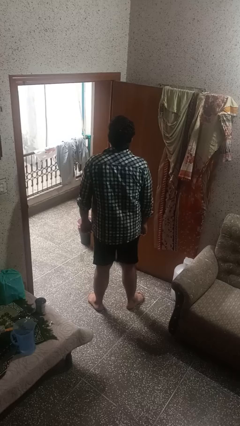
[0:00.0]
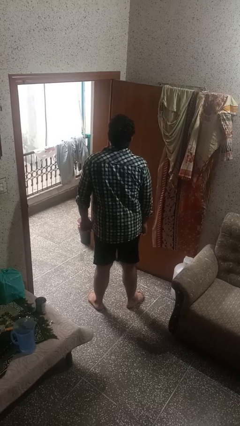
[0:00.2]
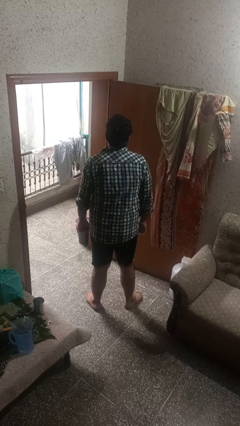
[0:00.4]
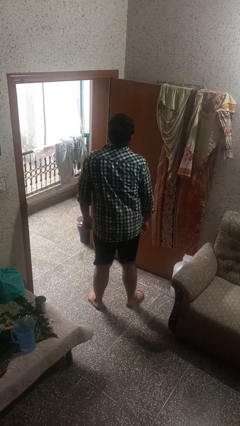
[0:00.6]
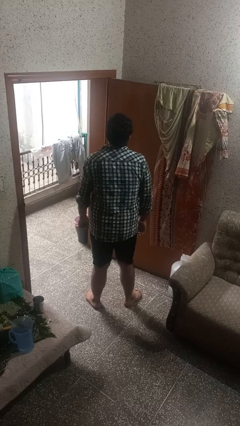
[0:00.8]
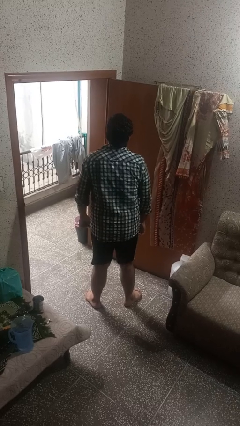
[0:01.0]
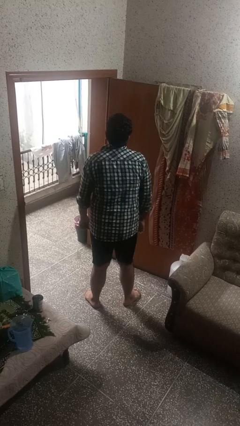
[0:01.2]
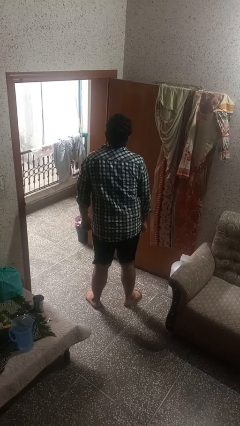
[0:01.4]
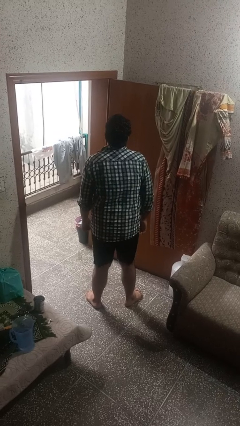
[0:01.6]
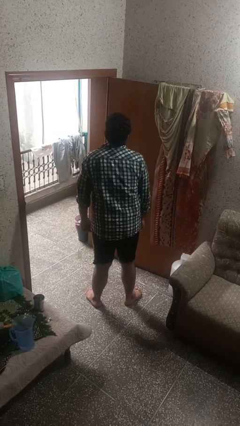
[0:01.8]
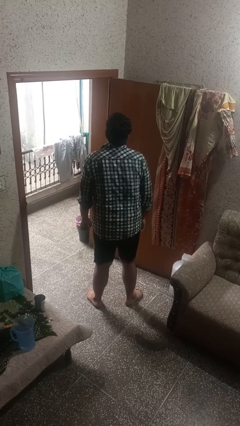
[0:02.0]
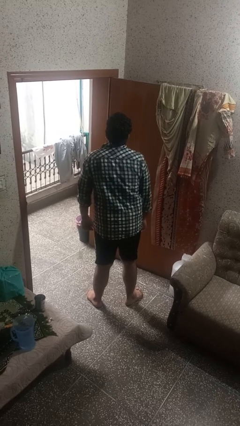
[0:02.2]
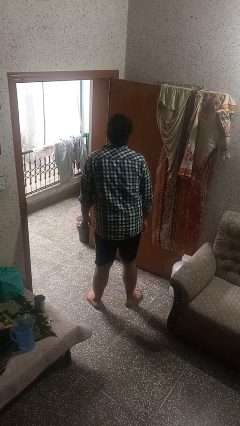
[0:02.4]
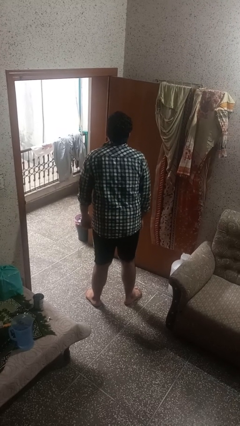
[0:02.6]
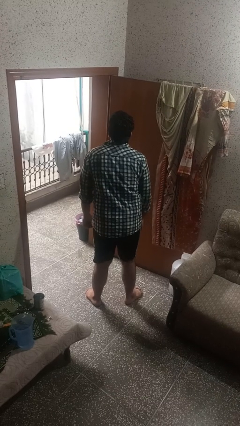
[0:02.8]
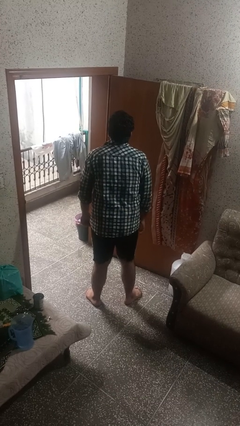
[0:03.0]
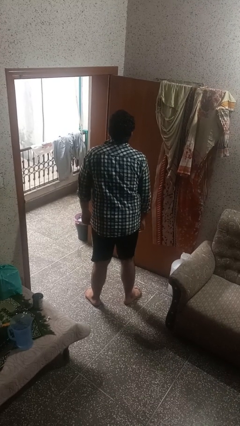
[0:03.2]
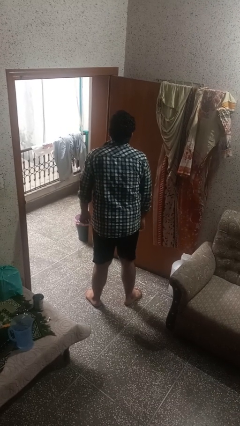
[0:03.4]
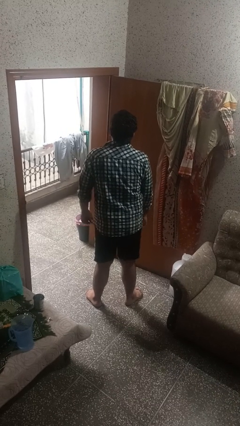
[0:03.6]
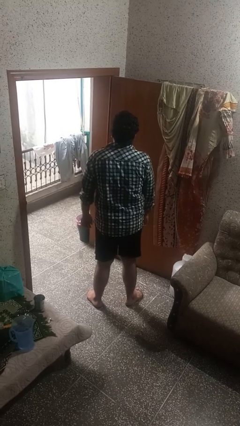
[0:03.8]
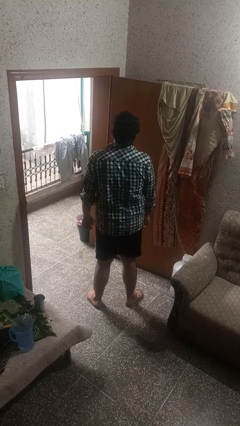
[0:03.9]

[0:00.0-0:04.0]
person wiggles hips

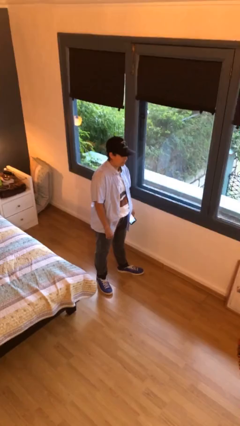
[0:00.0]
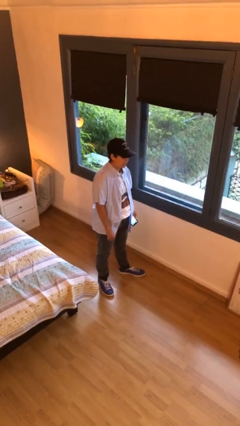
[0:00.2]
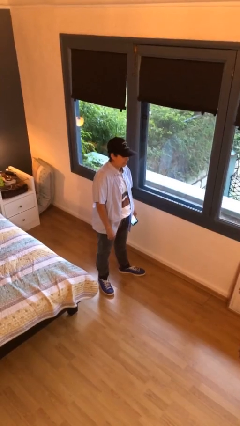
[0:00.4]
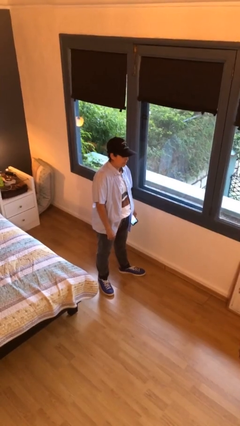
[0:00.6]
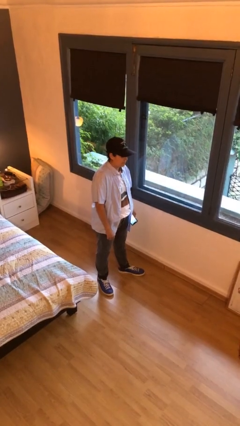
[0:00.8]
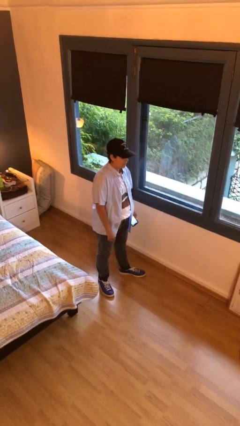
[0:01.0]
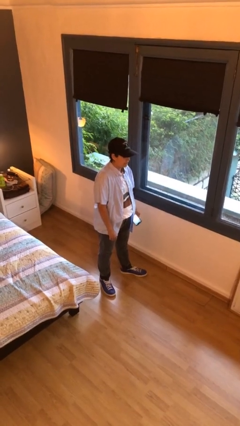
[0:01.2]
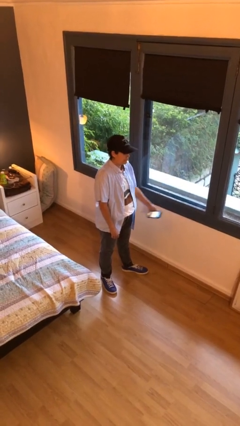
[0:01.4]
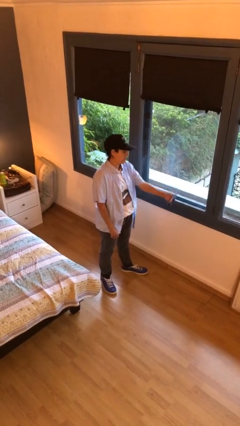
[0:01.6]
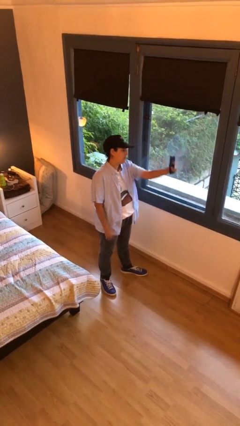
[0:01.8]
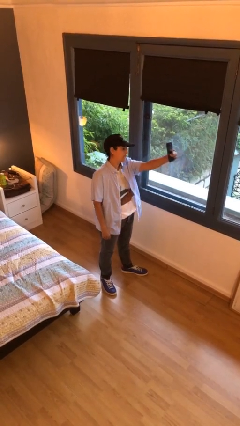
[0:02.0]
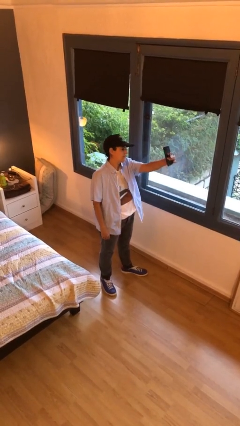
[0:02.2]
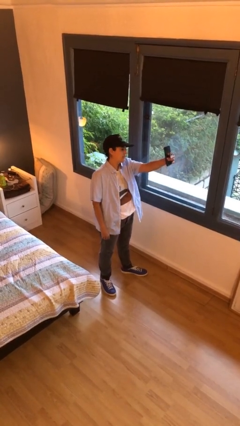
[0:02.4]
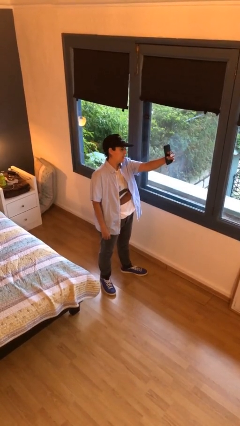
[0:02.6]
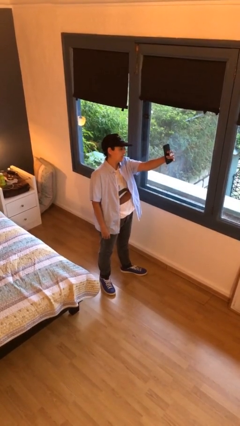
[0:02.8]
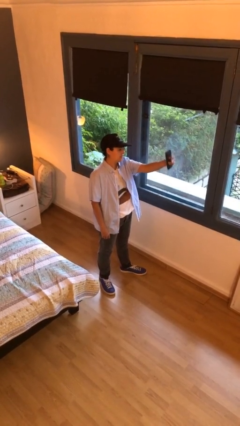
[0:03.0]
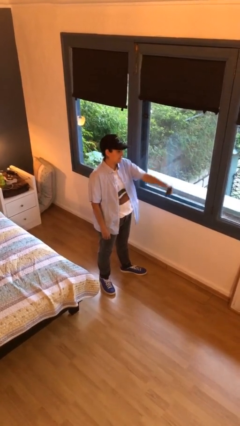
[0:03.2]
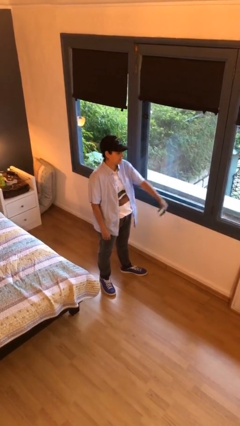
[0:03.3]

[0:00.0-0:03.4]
person takes selfie

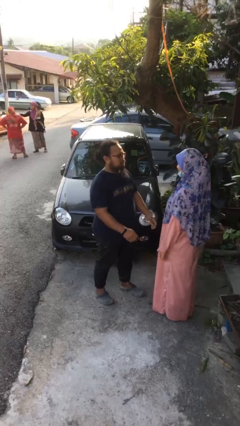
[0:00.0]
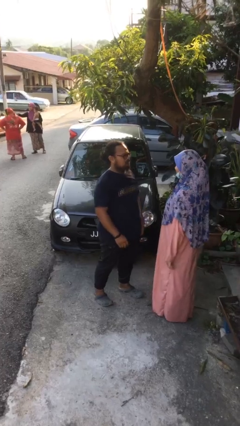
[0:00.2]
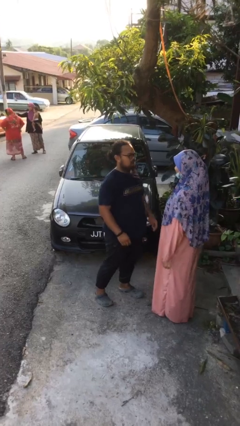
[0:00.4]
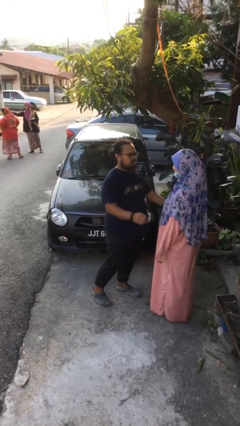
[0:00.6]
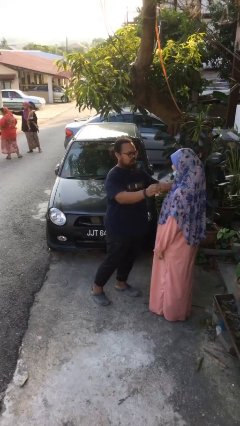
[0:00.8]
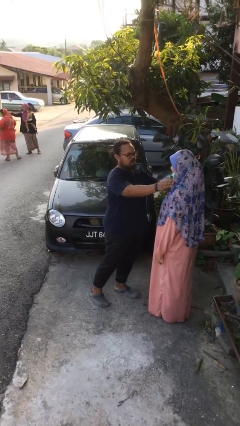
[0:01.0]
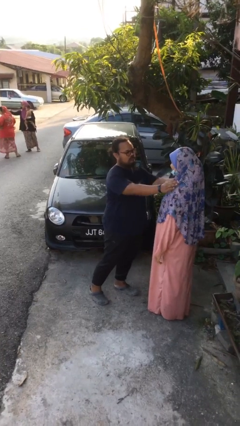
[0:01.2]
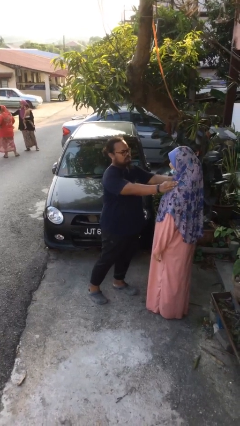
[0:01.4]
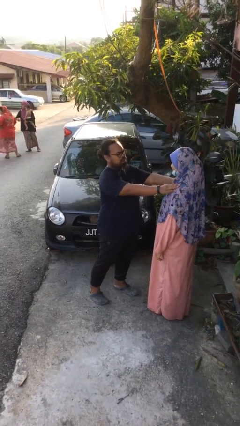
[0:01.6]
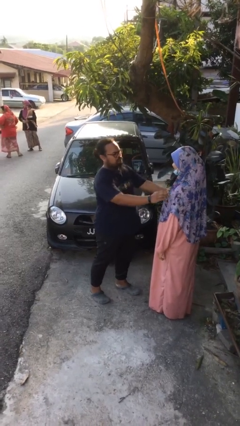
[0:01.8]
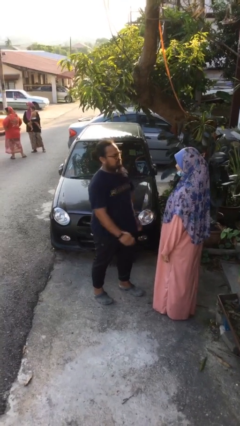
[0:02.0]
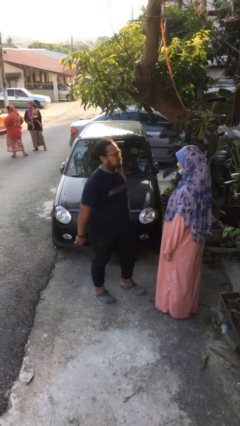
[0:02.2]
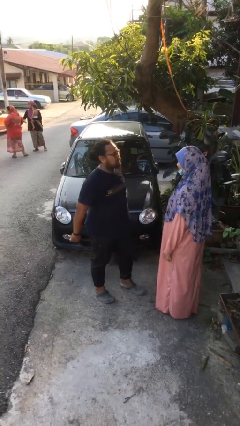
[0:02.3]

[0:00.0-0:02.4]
person pounds shoulders of person

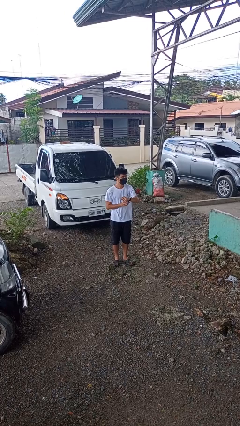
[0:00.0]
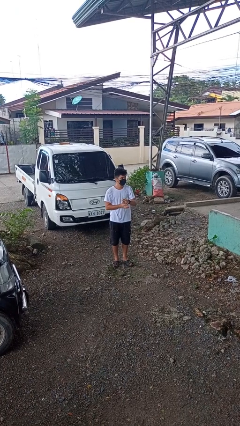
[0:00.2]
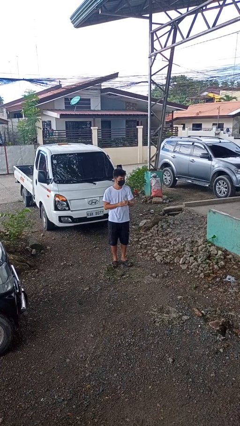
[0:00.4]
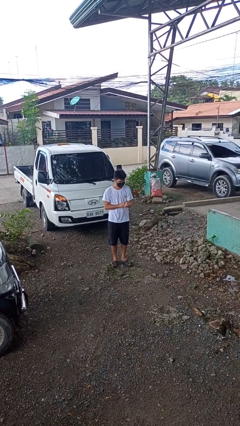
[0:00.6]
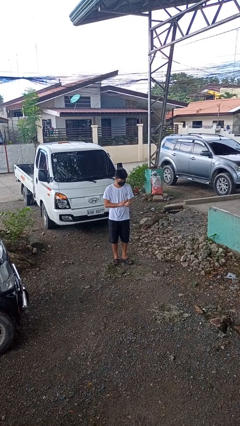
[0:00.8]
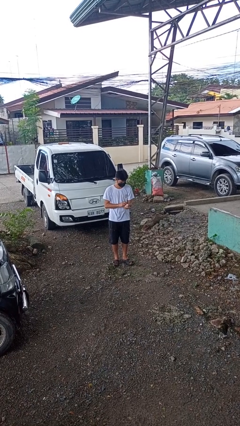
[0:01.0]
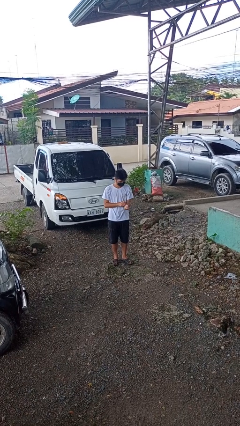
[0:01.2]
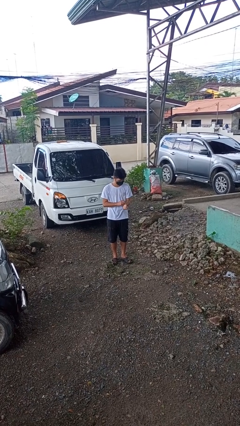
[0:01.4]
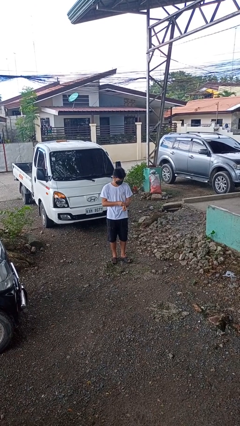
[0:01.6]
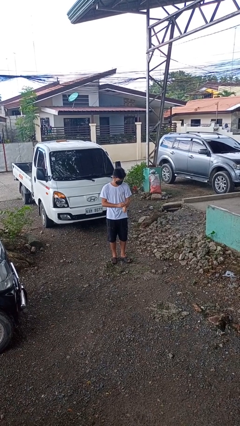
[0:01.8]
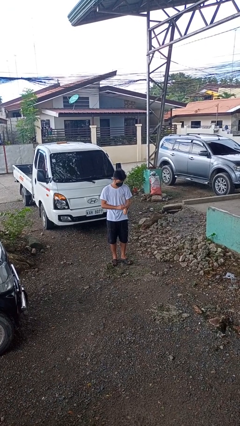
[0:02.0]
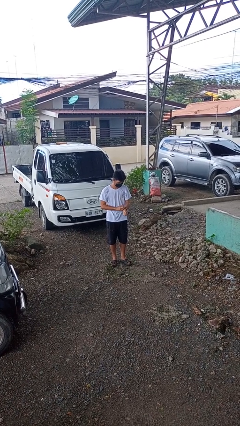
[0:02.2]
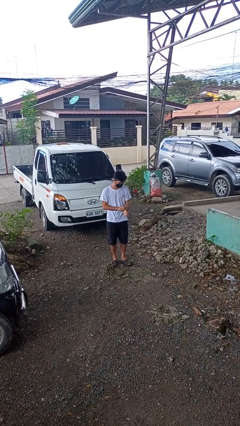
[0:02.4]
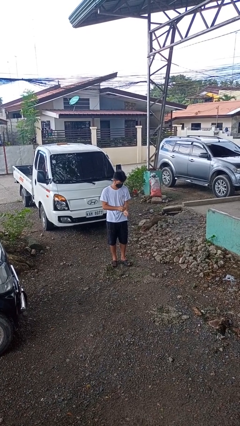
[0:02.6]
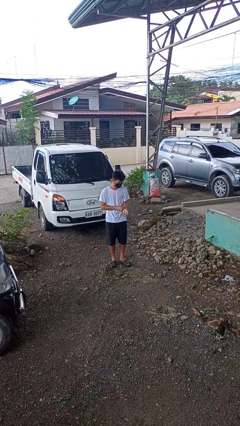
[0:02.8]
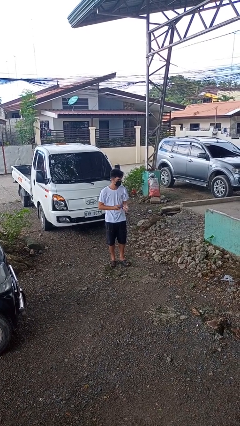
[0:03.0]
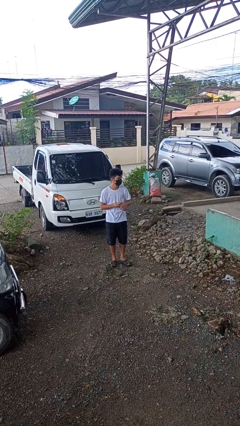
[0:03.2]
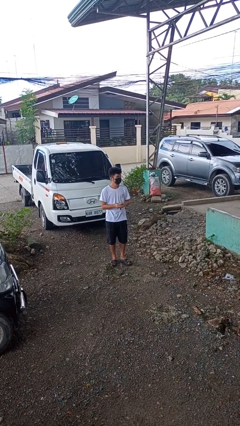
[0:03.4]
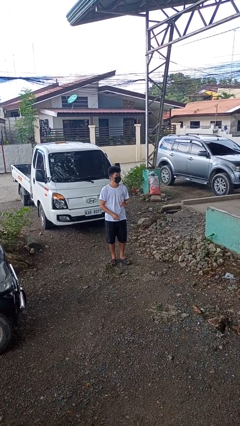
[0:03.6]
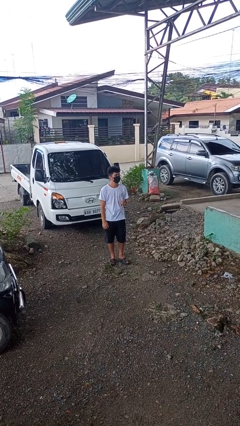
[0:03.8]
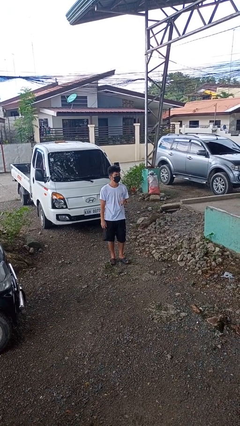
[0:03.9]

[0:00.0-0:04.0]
person takes off wristwatch

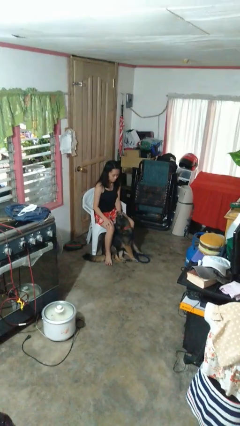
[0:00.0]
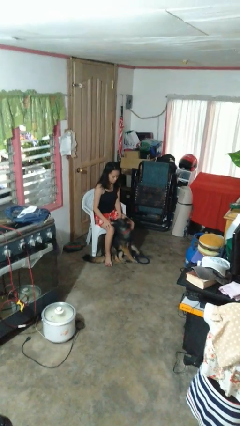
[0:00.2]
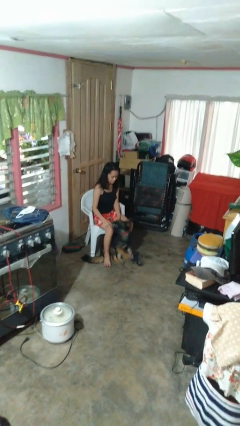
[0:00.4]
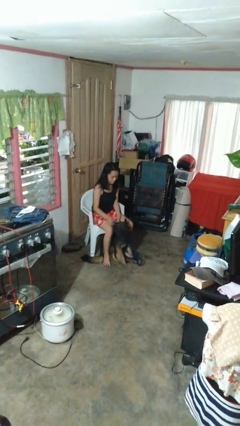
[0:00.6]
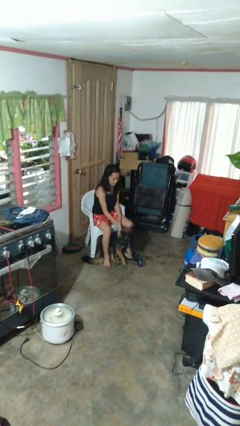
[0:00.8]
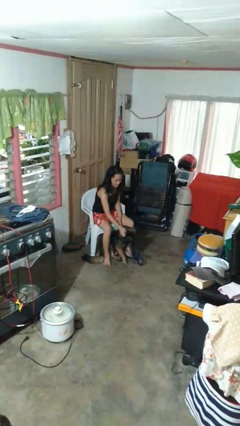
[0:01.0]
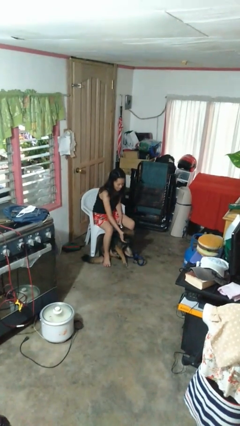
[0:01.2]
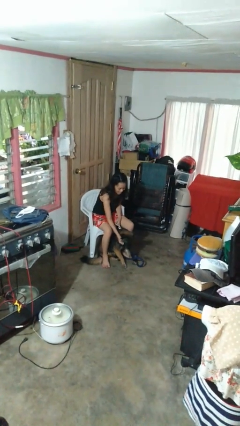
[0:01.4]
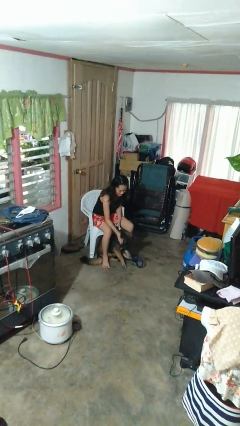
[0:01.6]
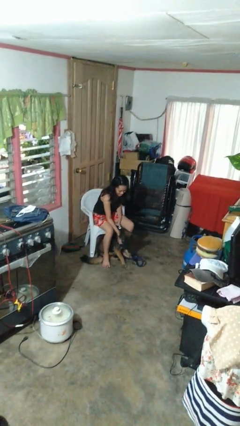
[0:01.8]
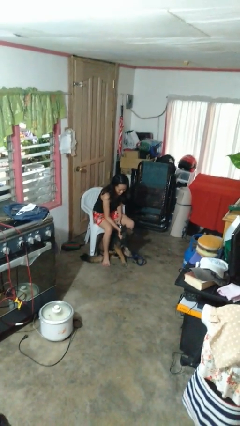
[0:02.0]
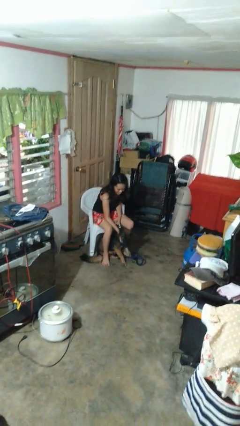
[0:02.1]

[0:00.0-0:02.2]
person pets dog

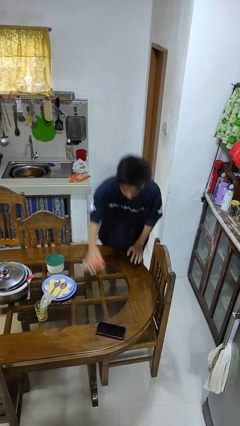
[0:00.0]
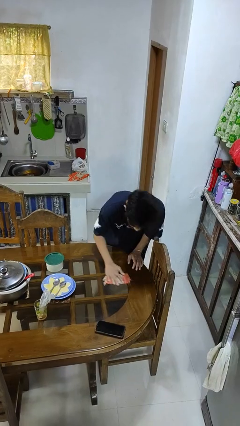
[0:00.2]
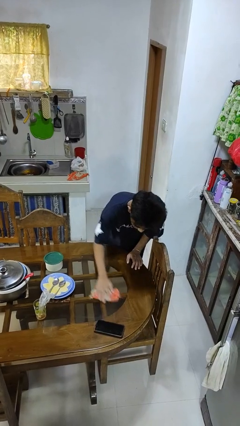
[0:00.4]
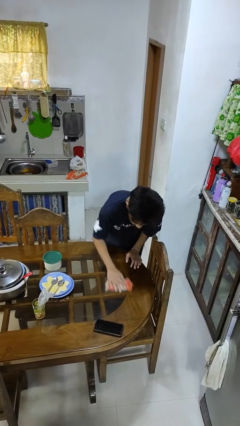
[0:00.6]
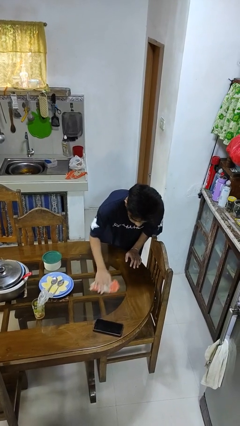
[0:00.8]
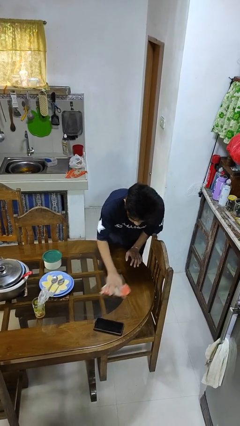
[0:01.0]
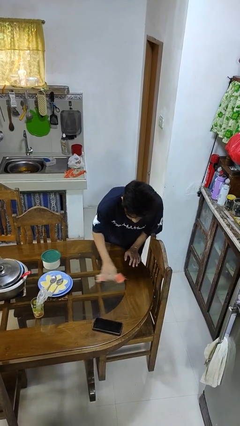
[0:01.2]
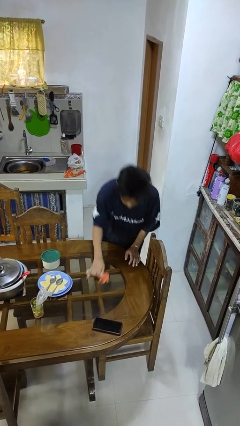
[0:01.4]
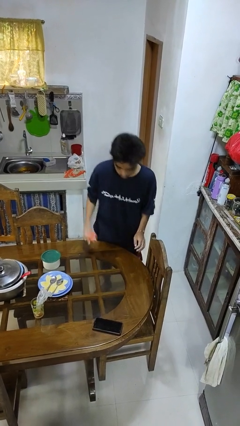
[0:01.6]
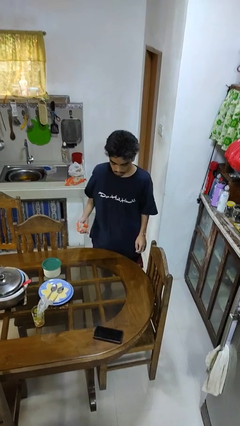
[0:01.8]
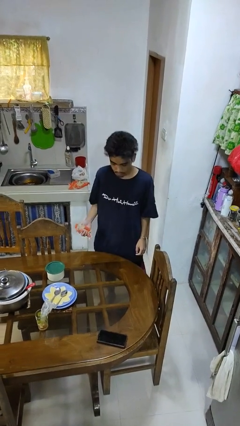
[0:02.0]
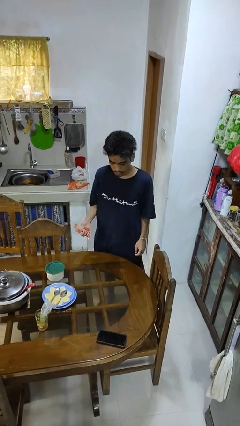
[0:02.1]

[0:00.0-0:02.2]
person cleans table with rag
